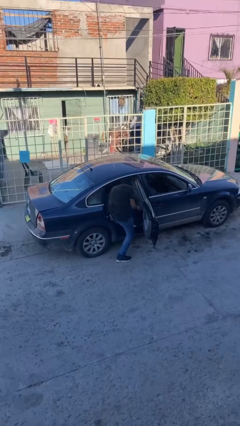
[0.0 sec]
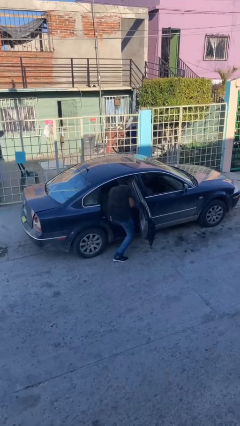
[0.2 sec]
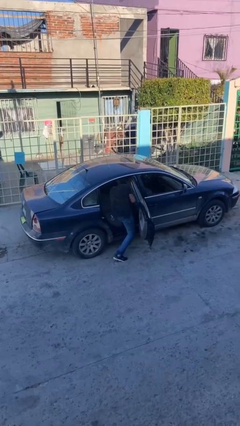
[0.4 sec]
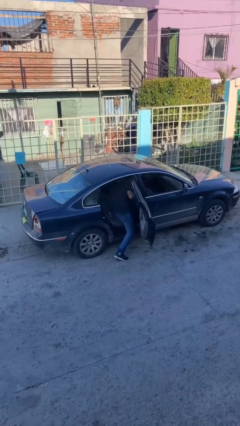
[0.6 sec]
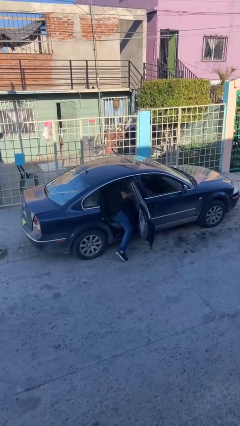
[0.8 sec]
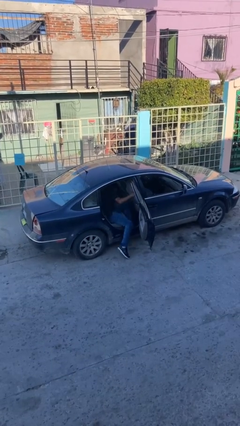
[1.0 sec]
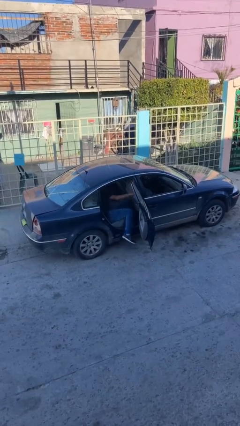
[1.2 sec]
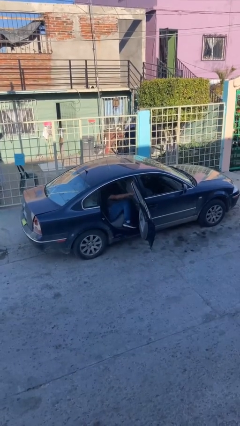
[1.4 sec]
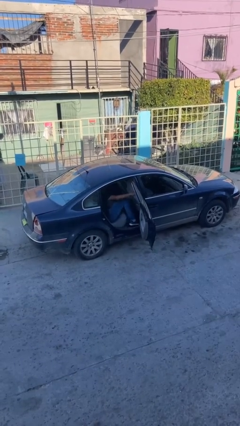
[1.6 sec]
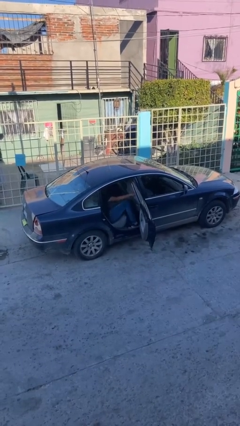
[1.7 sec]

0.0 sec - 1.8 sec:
person enters car

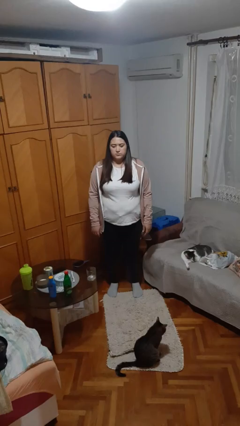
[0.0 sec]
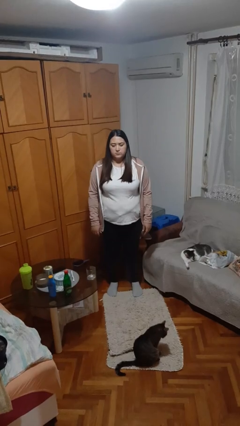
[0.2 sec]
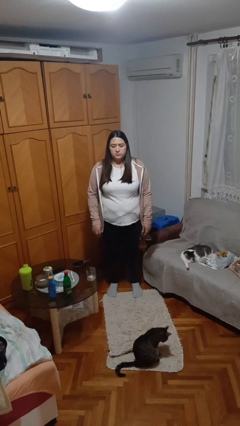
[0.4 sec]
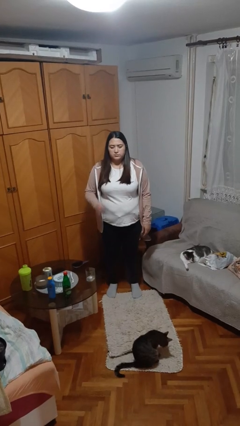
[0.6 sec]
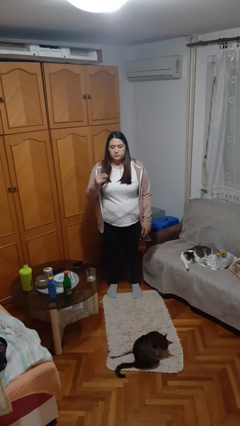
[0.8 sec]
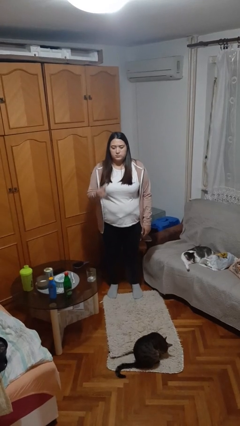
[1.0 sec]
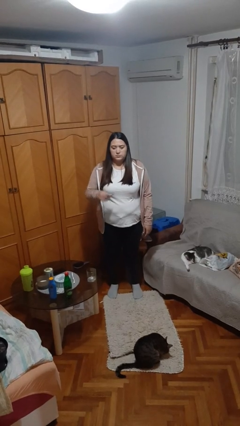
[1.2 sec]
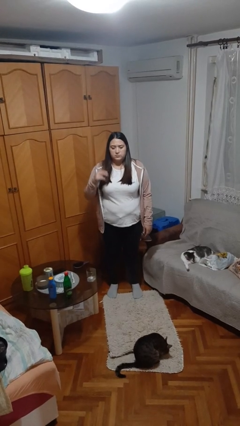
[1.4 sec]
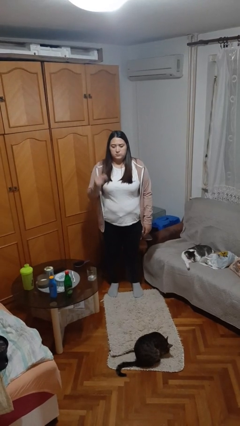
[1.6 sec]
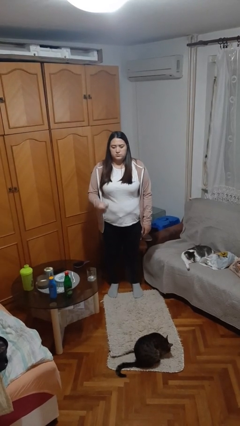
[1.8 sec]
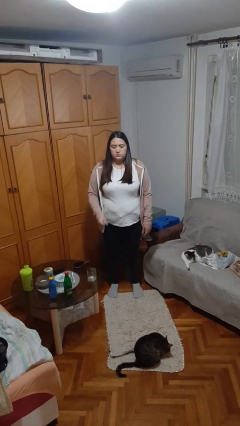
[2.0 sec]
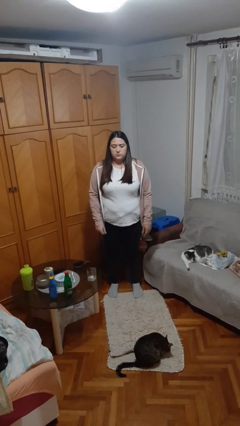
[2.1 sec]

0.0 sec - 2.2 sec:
person snaps fingers

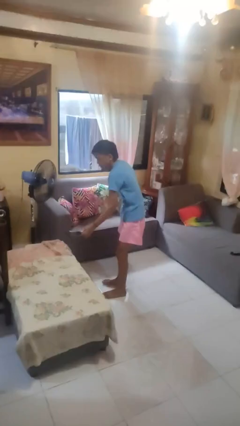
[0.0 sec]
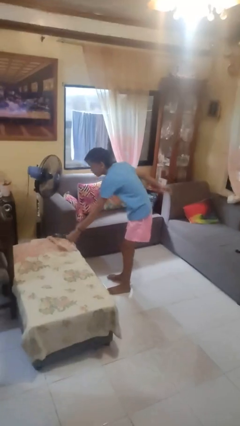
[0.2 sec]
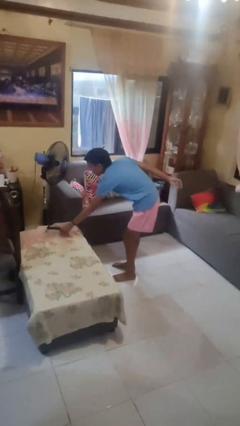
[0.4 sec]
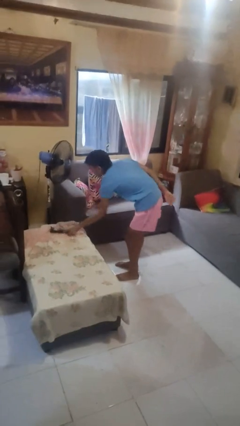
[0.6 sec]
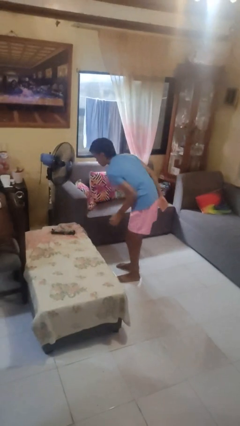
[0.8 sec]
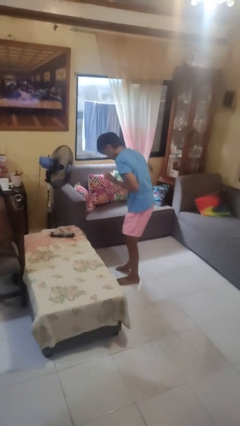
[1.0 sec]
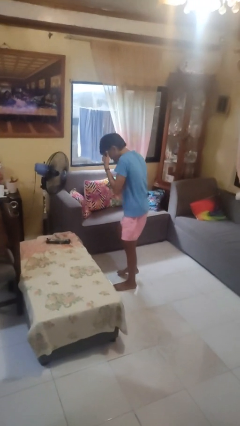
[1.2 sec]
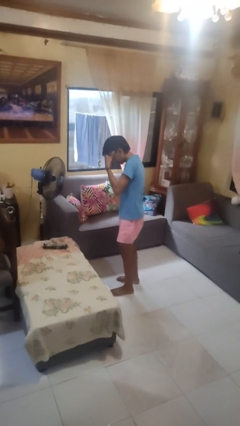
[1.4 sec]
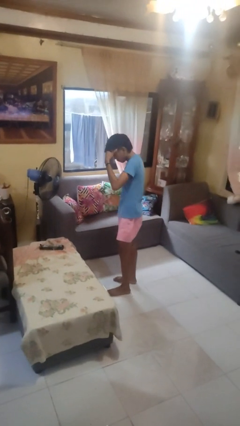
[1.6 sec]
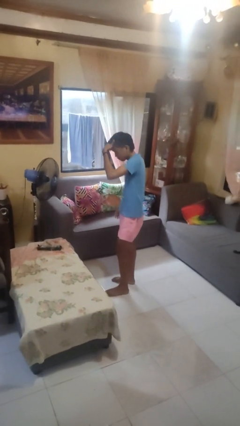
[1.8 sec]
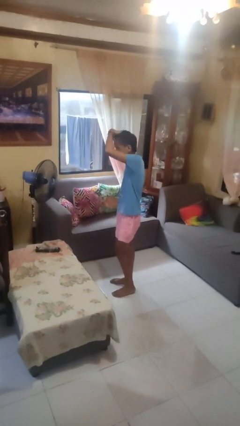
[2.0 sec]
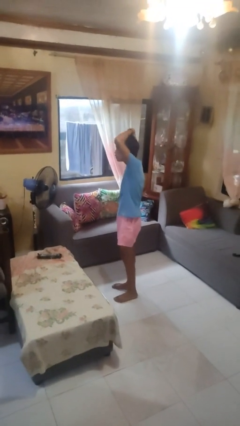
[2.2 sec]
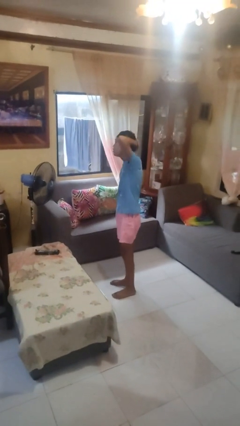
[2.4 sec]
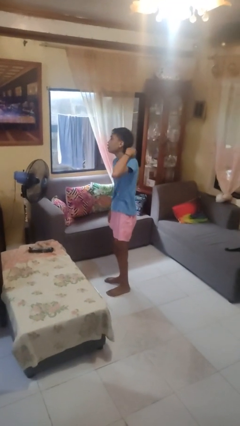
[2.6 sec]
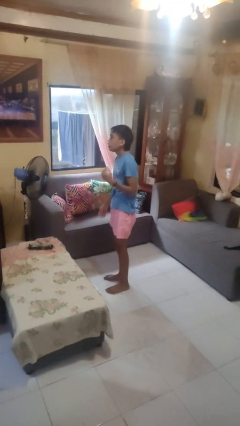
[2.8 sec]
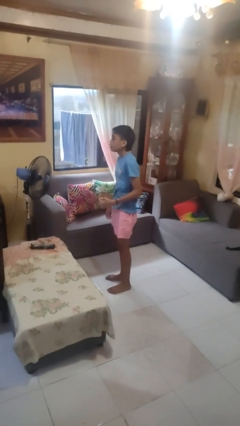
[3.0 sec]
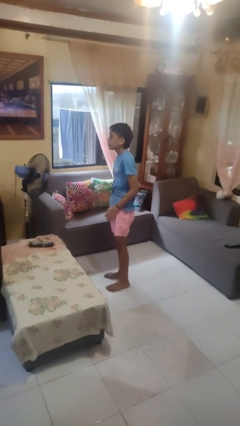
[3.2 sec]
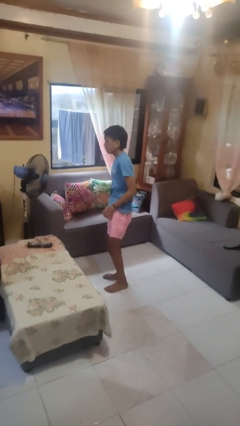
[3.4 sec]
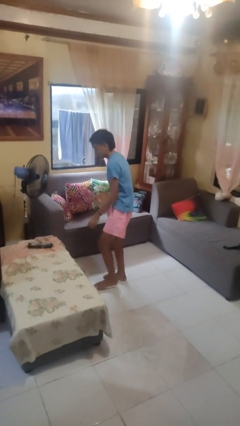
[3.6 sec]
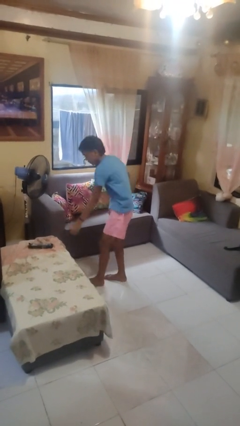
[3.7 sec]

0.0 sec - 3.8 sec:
person puts down object on couch

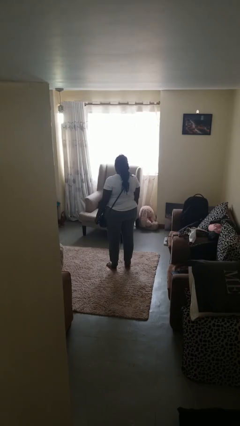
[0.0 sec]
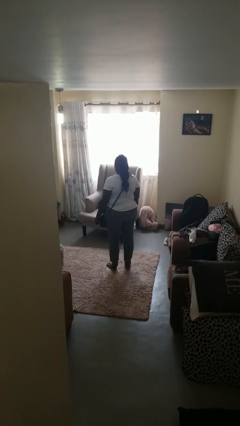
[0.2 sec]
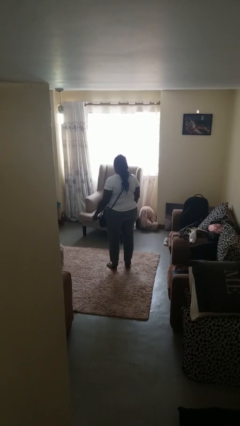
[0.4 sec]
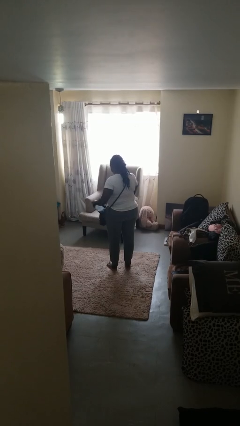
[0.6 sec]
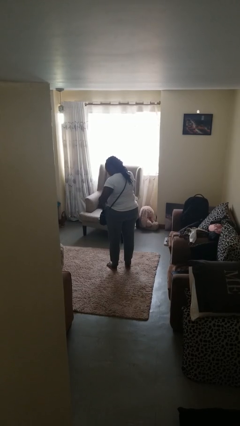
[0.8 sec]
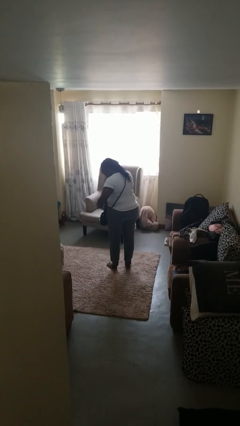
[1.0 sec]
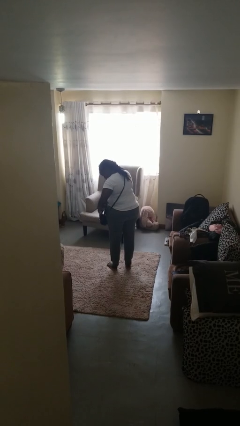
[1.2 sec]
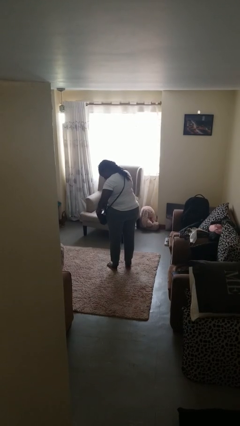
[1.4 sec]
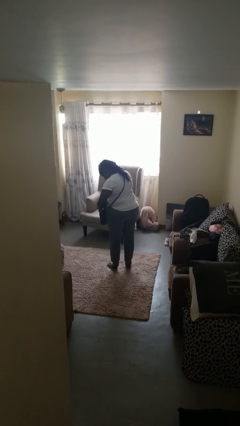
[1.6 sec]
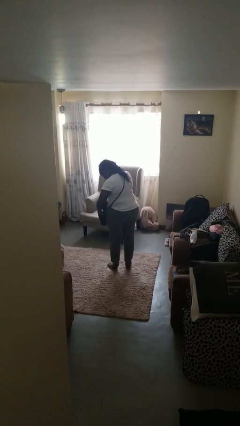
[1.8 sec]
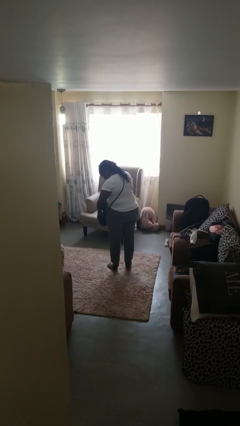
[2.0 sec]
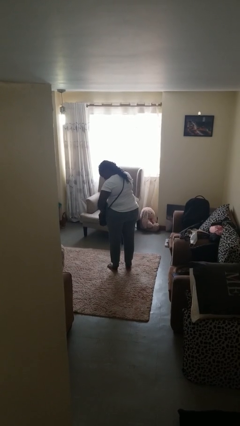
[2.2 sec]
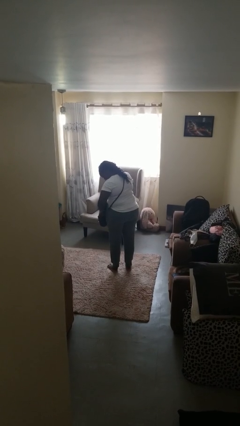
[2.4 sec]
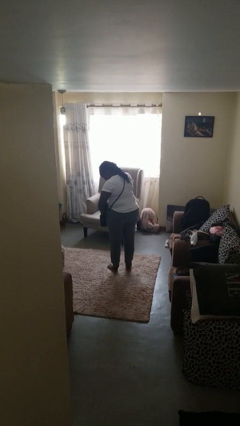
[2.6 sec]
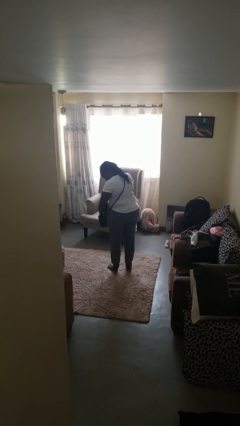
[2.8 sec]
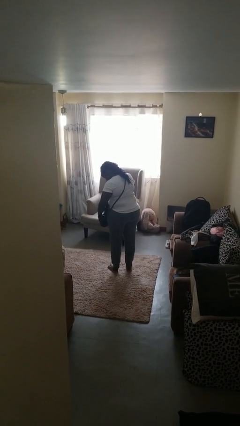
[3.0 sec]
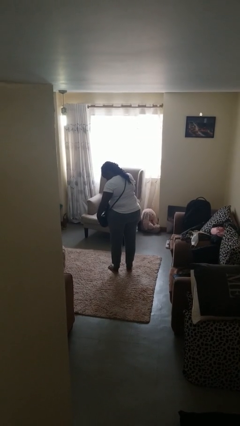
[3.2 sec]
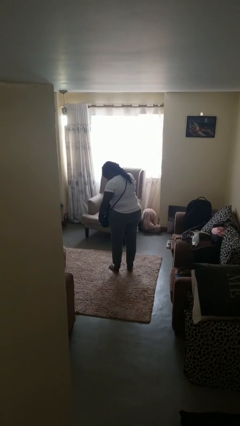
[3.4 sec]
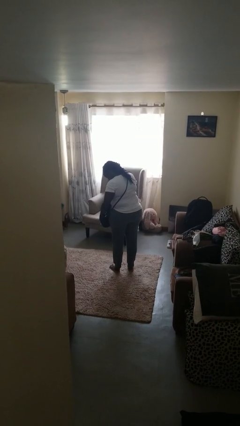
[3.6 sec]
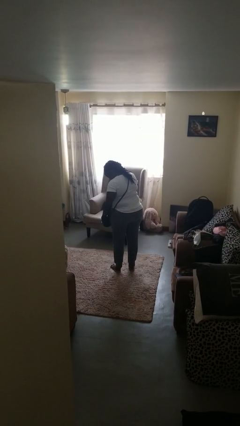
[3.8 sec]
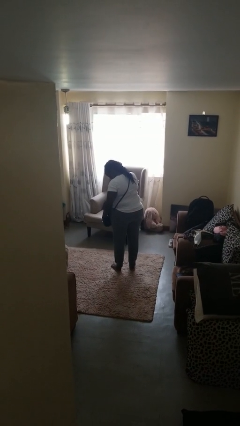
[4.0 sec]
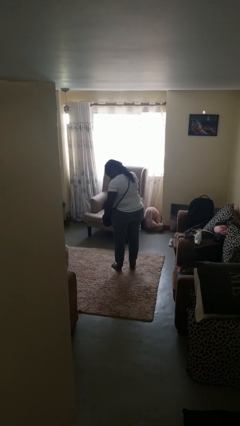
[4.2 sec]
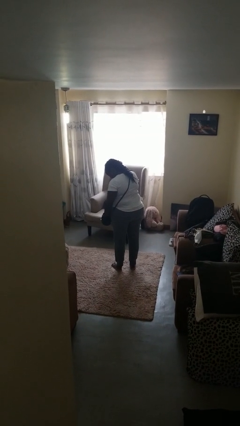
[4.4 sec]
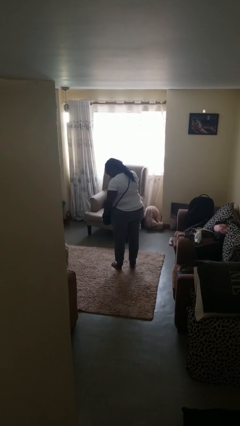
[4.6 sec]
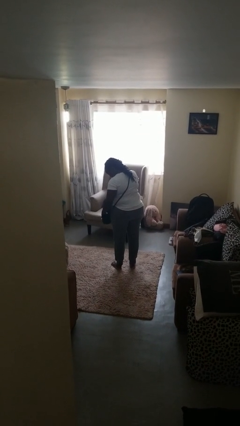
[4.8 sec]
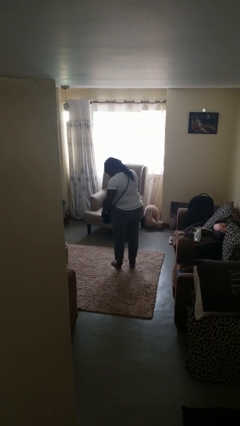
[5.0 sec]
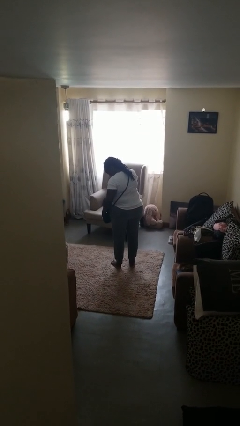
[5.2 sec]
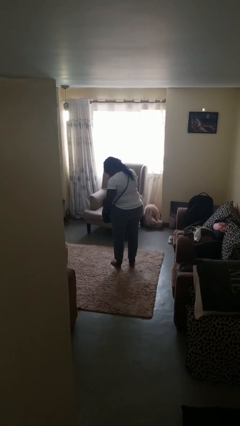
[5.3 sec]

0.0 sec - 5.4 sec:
person searches in purse

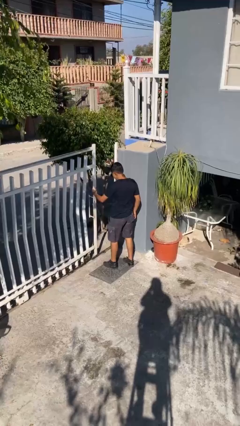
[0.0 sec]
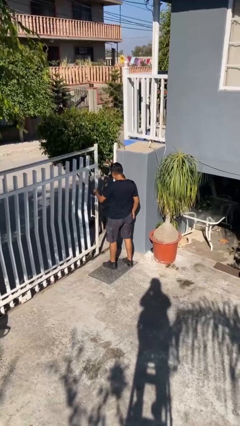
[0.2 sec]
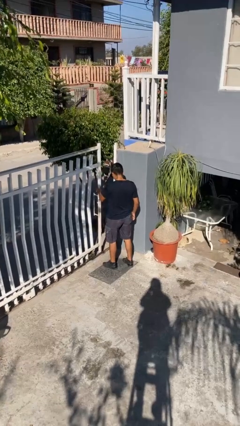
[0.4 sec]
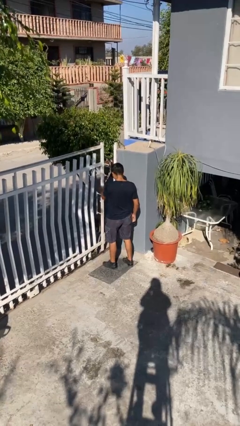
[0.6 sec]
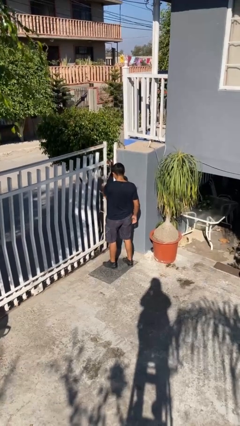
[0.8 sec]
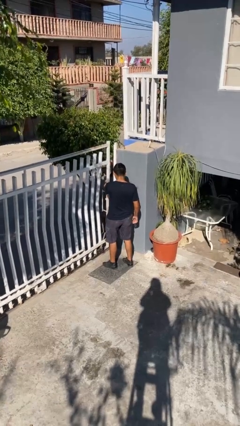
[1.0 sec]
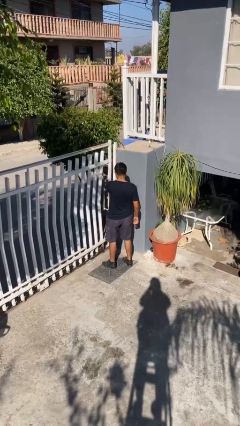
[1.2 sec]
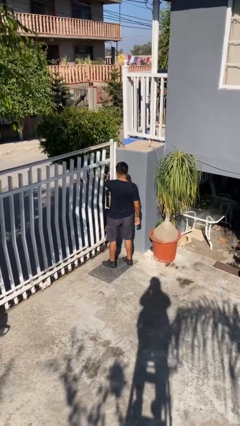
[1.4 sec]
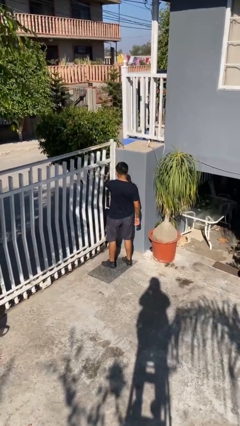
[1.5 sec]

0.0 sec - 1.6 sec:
person closes facility door

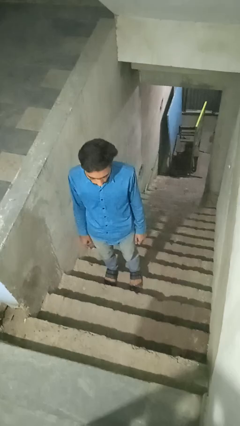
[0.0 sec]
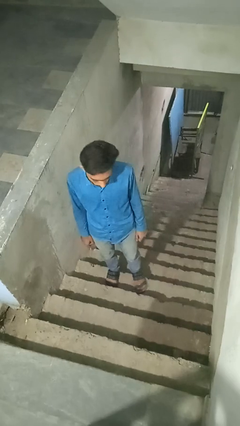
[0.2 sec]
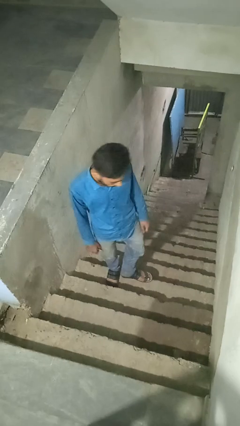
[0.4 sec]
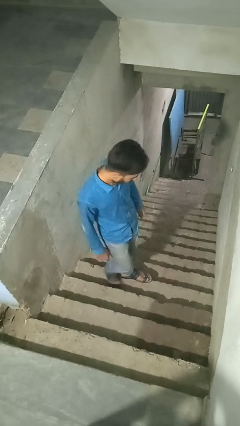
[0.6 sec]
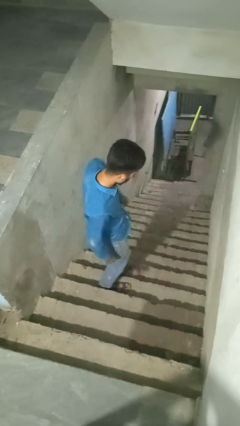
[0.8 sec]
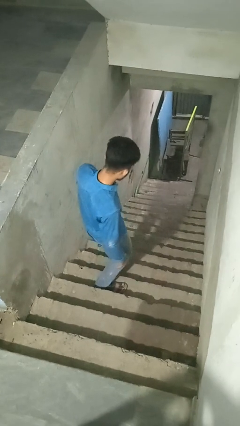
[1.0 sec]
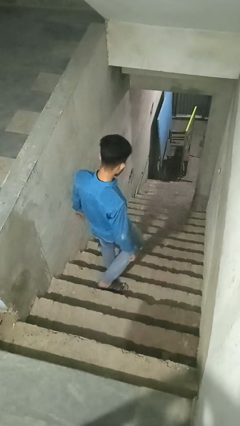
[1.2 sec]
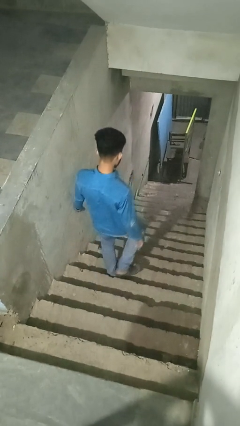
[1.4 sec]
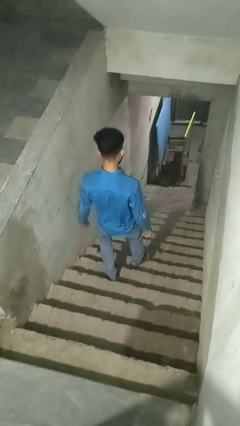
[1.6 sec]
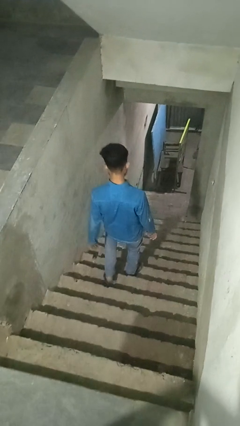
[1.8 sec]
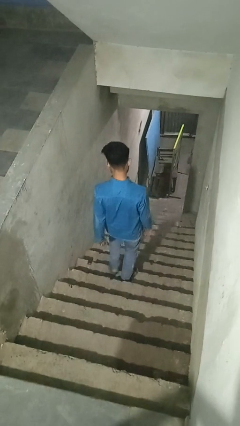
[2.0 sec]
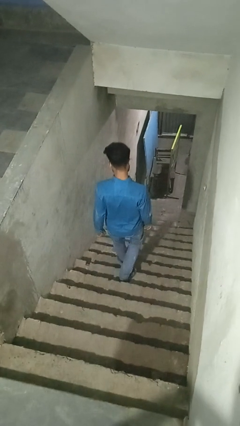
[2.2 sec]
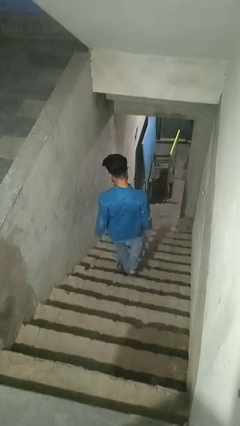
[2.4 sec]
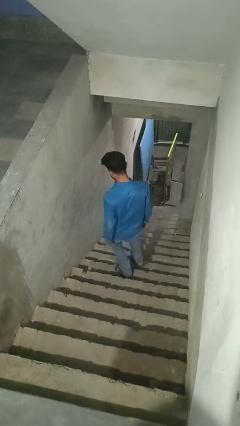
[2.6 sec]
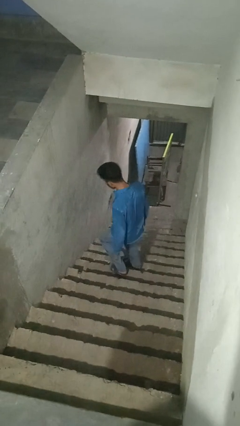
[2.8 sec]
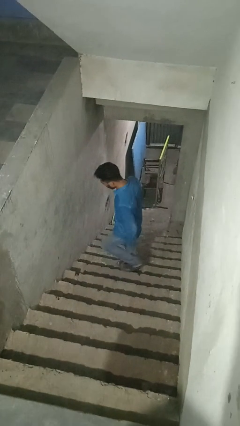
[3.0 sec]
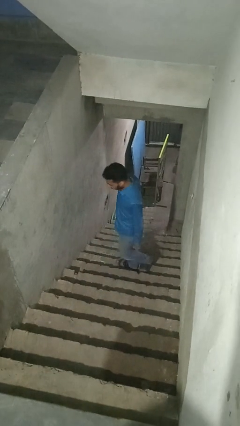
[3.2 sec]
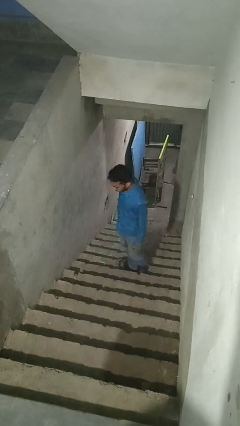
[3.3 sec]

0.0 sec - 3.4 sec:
person climbs down stairs
